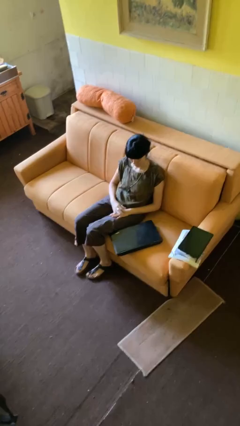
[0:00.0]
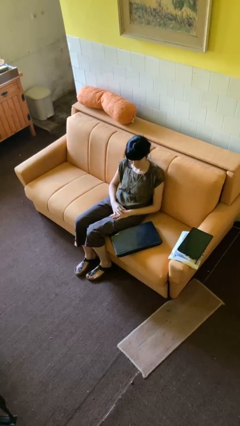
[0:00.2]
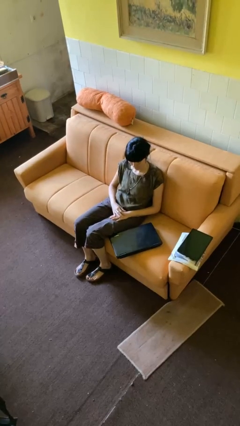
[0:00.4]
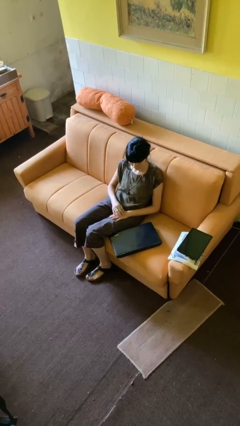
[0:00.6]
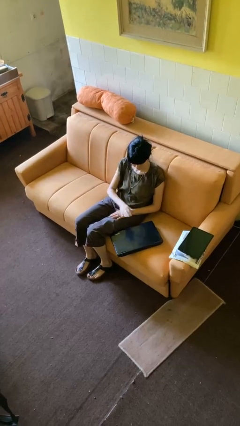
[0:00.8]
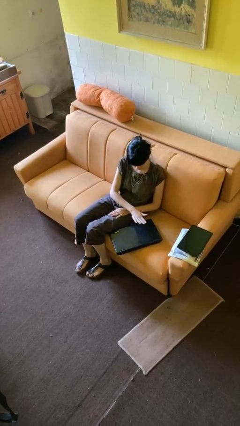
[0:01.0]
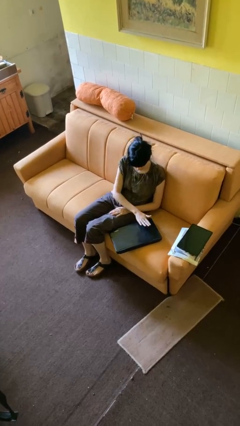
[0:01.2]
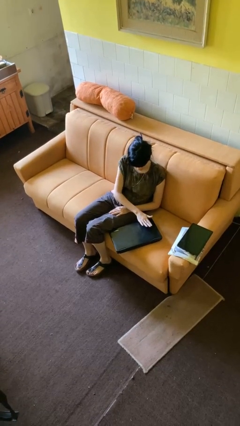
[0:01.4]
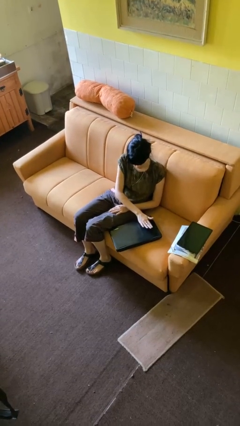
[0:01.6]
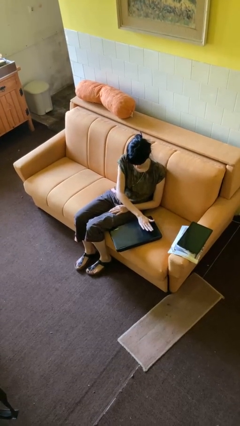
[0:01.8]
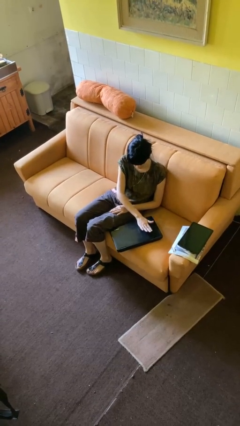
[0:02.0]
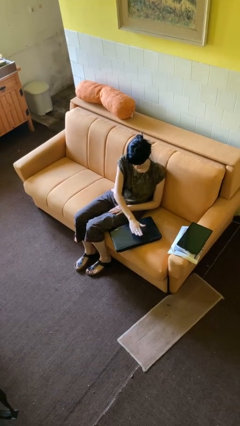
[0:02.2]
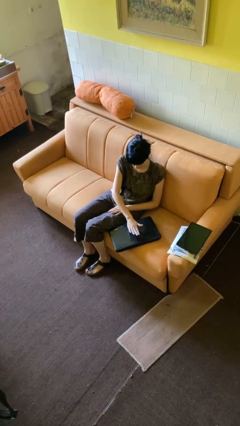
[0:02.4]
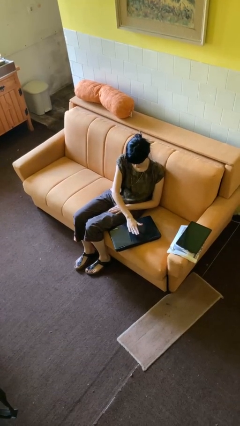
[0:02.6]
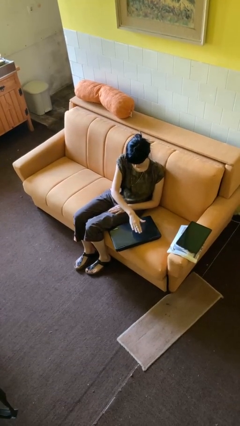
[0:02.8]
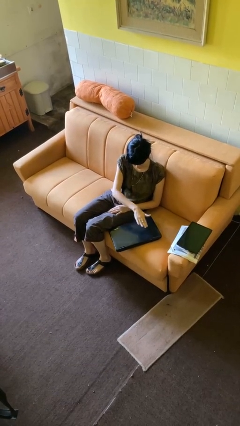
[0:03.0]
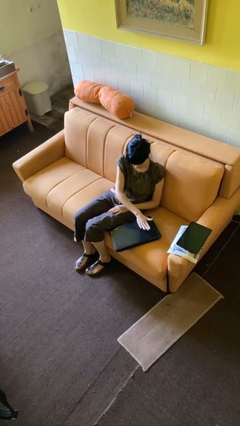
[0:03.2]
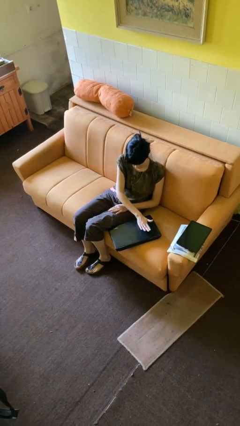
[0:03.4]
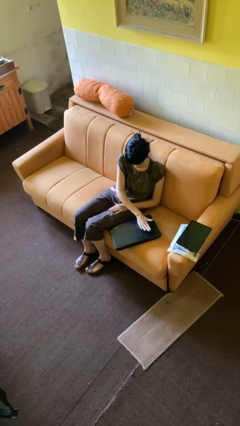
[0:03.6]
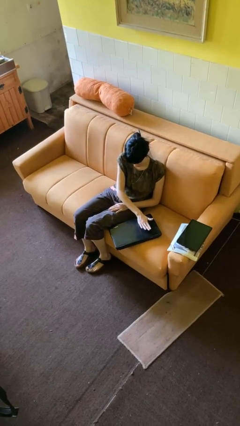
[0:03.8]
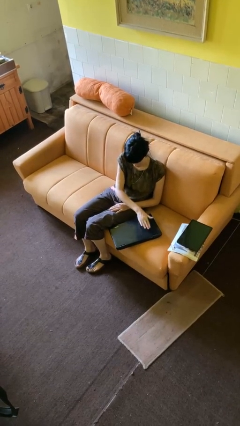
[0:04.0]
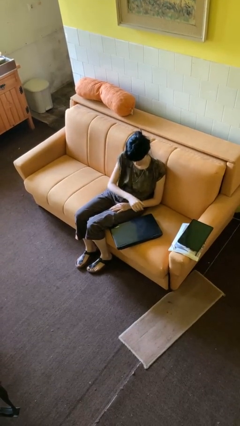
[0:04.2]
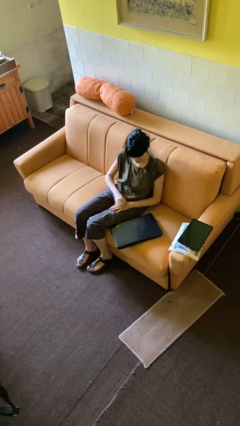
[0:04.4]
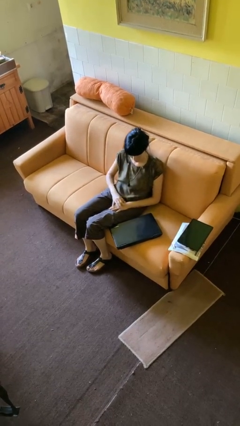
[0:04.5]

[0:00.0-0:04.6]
person waves hand over object

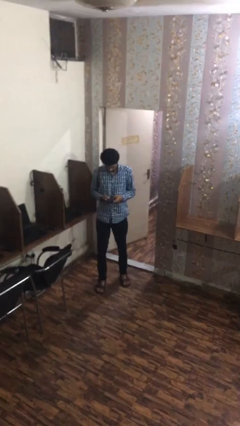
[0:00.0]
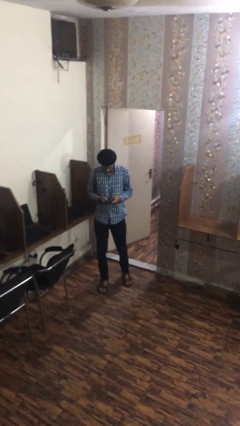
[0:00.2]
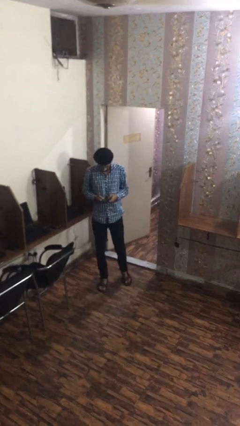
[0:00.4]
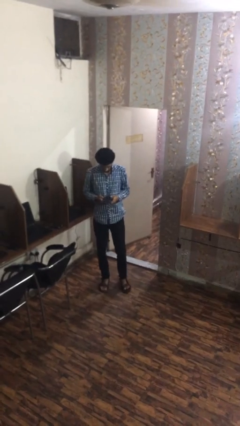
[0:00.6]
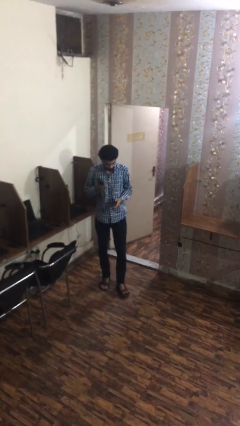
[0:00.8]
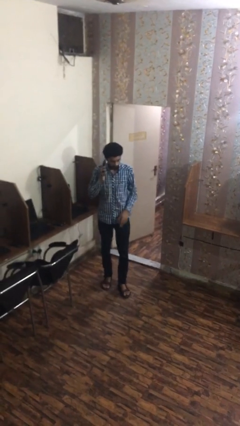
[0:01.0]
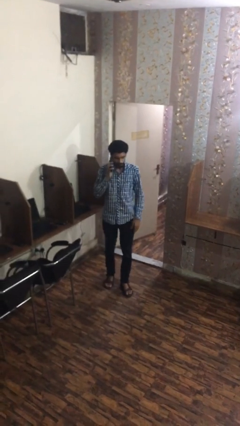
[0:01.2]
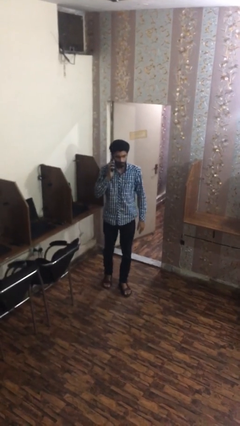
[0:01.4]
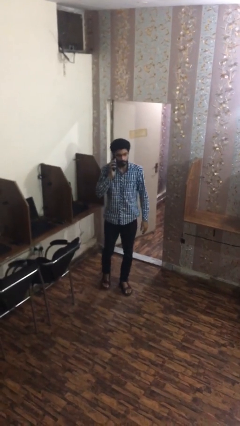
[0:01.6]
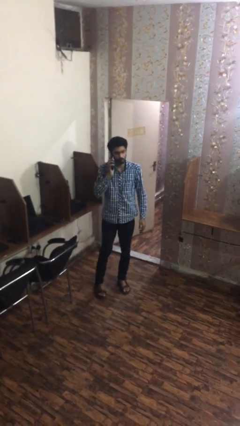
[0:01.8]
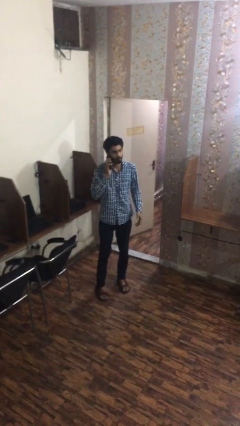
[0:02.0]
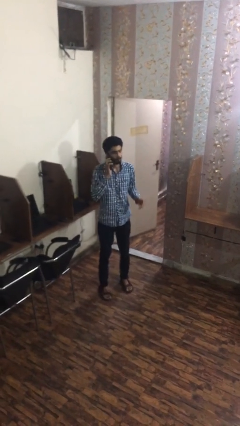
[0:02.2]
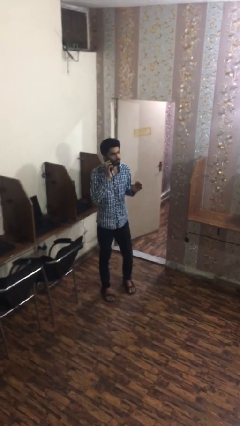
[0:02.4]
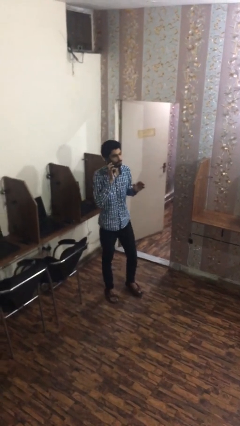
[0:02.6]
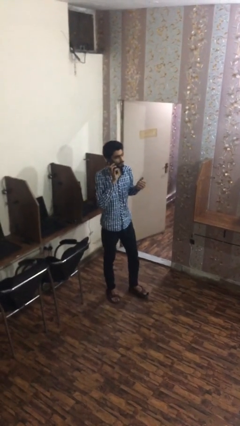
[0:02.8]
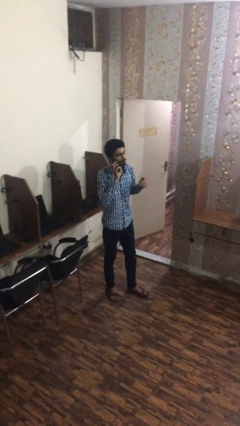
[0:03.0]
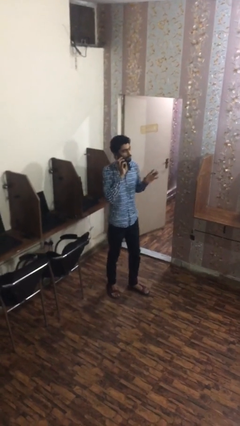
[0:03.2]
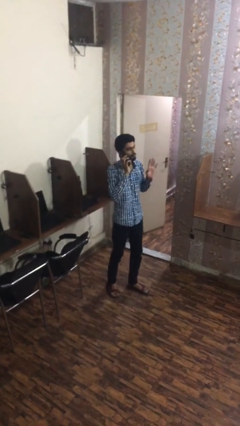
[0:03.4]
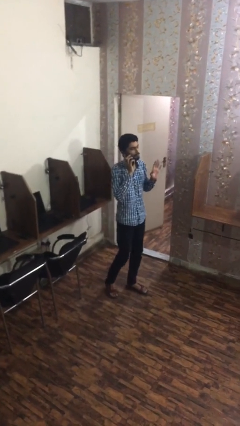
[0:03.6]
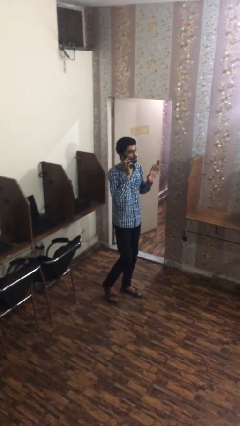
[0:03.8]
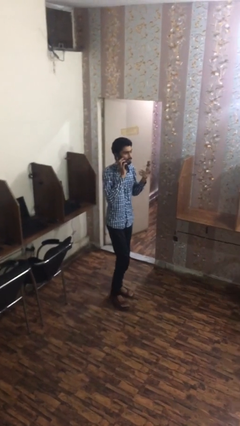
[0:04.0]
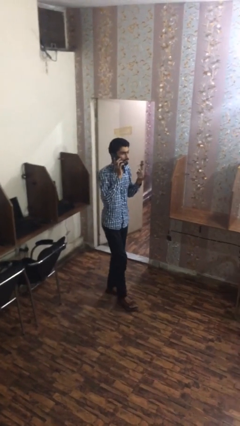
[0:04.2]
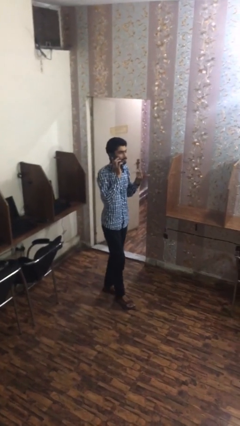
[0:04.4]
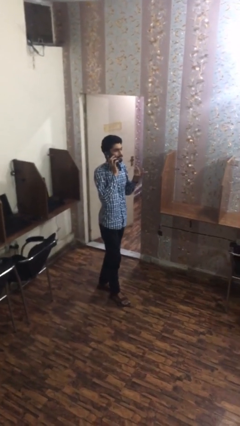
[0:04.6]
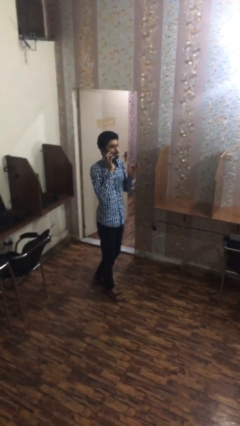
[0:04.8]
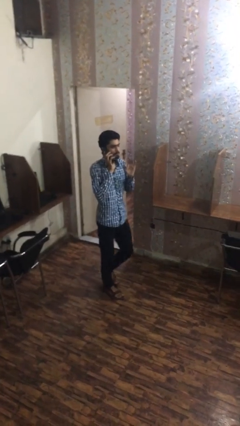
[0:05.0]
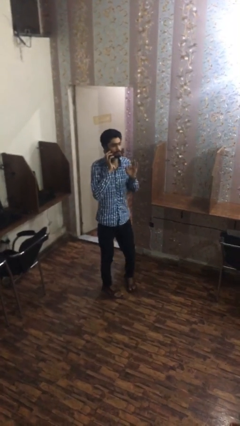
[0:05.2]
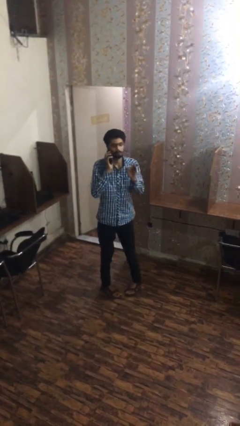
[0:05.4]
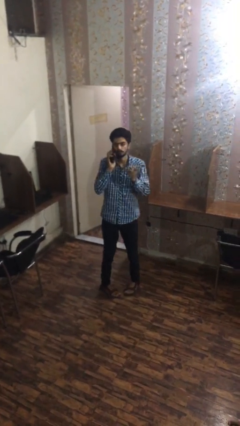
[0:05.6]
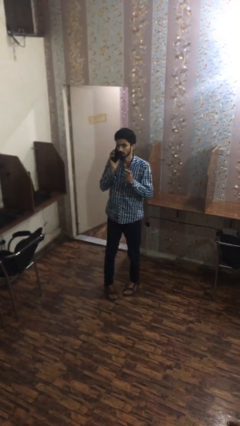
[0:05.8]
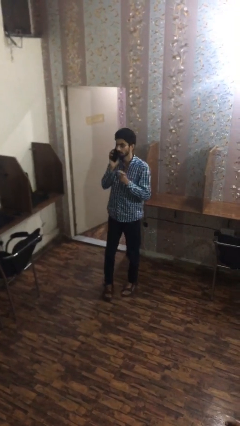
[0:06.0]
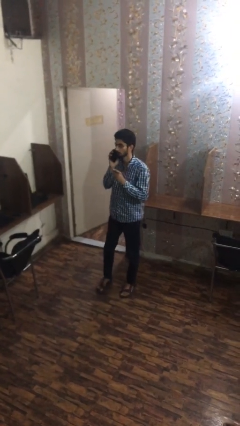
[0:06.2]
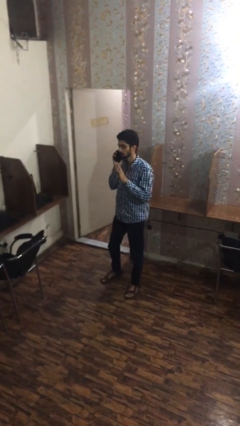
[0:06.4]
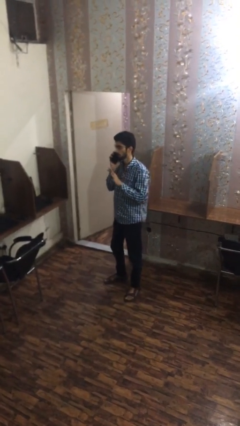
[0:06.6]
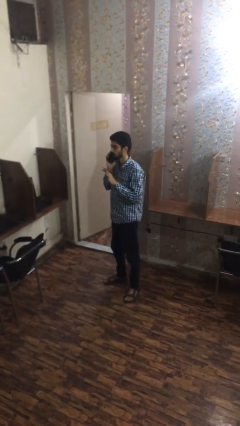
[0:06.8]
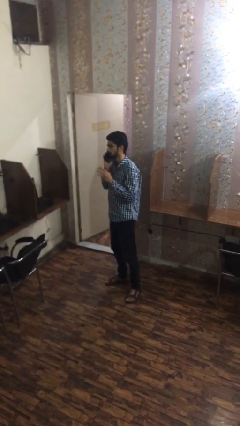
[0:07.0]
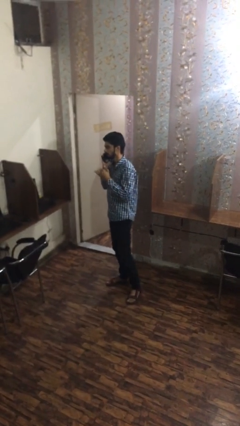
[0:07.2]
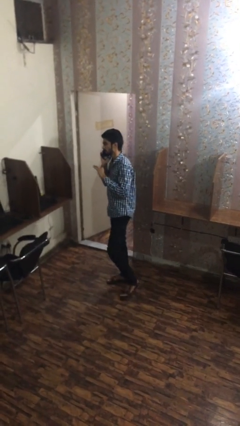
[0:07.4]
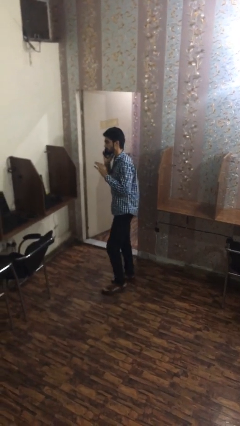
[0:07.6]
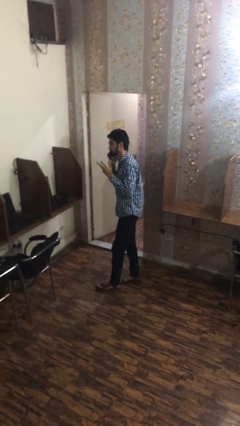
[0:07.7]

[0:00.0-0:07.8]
person talks on phone

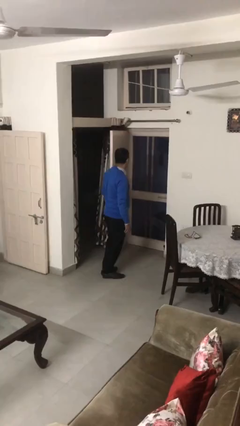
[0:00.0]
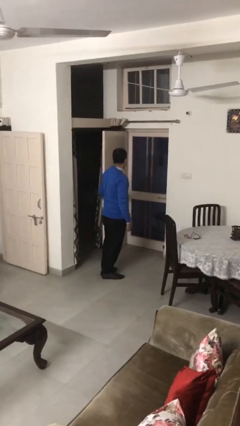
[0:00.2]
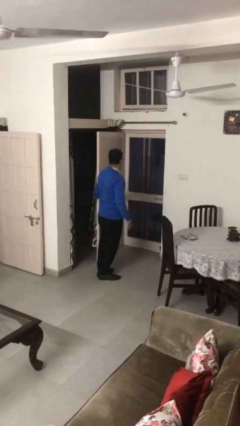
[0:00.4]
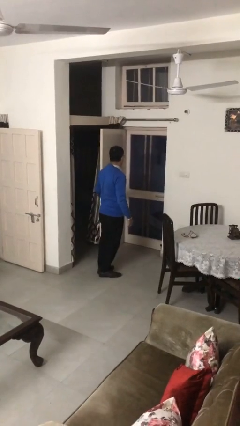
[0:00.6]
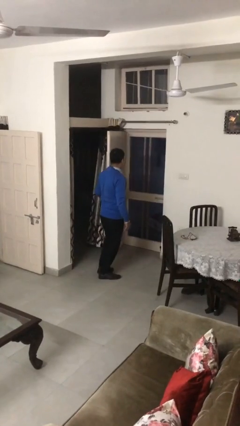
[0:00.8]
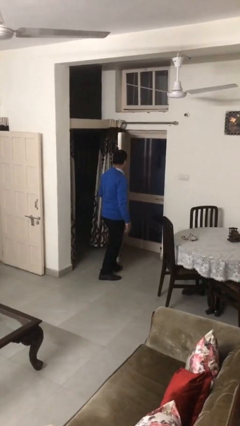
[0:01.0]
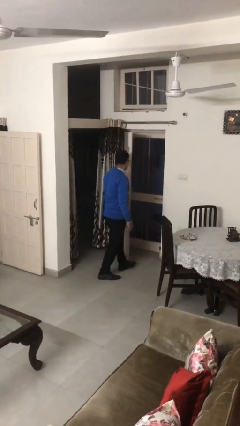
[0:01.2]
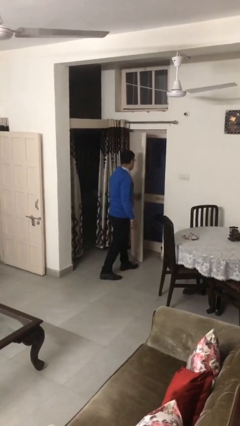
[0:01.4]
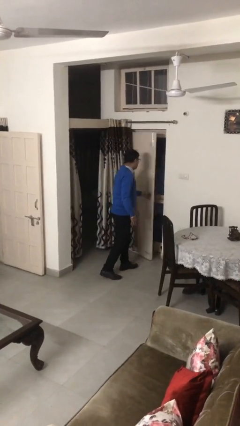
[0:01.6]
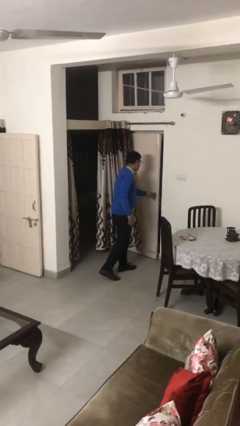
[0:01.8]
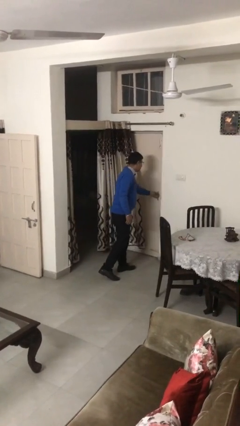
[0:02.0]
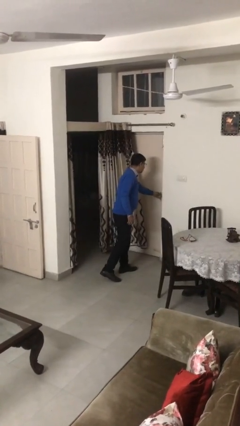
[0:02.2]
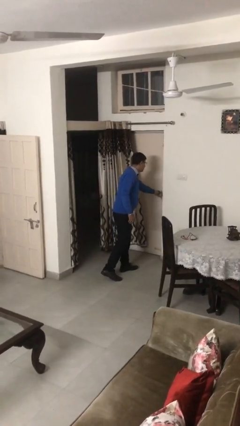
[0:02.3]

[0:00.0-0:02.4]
person closes facility door

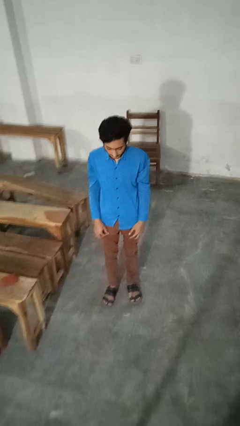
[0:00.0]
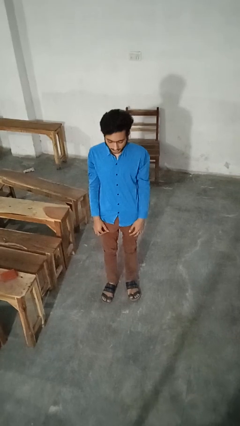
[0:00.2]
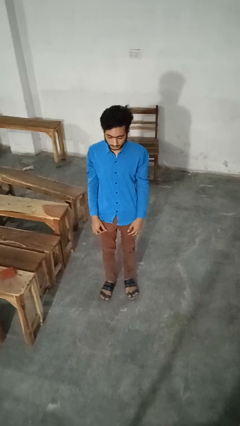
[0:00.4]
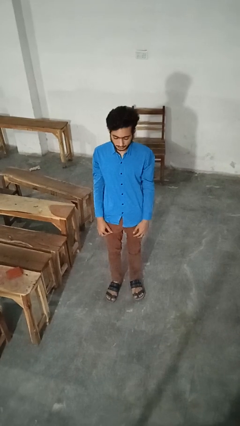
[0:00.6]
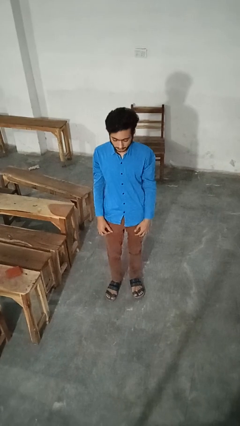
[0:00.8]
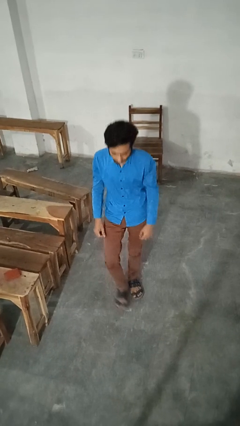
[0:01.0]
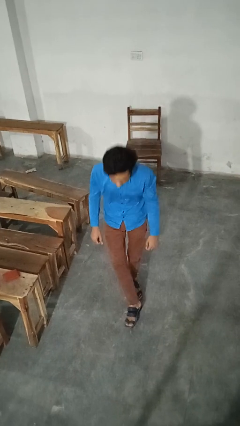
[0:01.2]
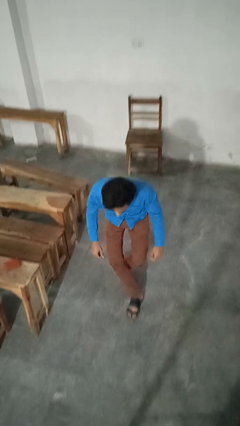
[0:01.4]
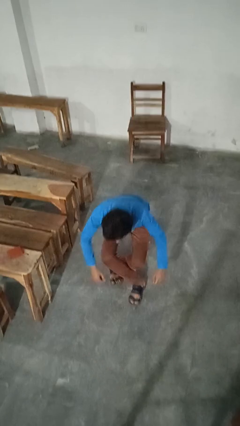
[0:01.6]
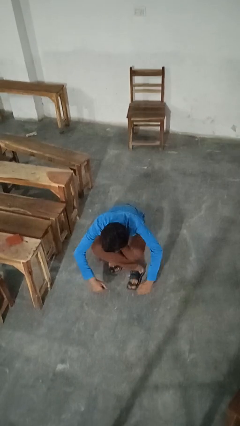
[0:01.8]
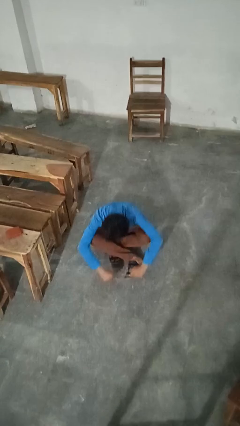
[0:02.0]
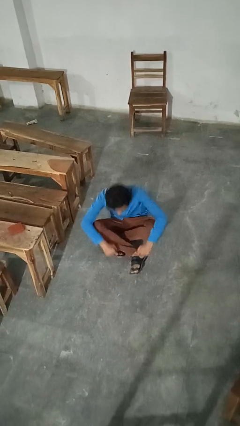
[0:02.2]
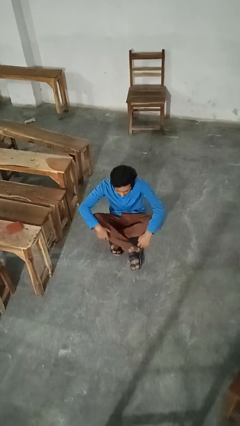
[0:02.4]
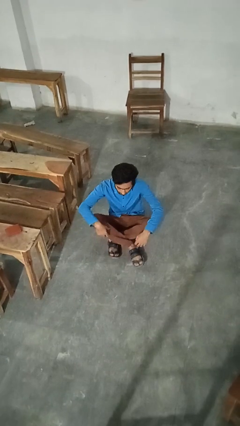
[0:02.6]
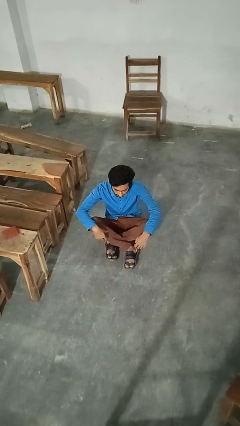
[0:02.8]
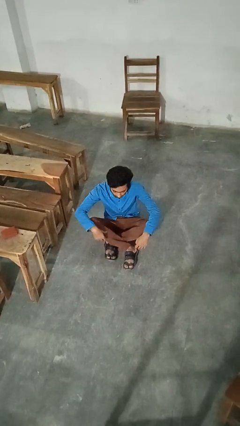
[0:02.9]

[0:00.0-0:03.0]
person sits crisscross
